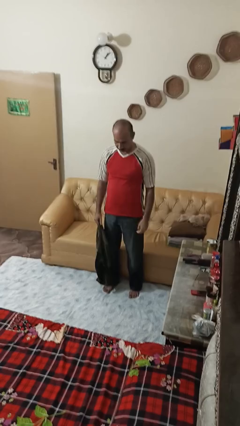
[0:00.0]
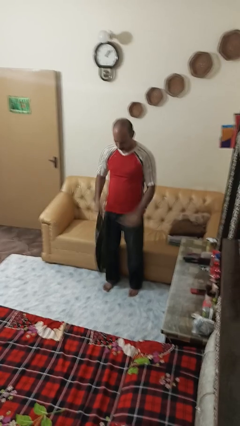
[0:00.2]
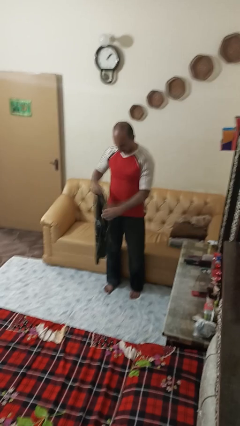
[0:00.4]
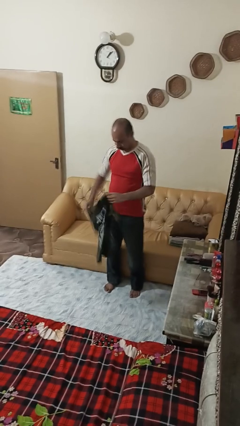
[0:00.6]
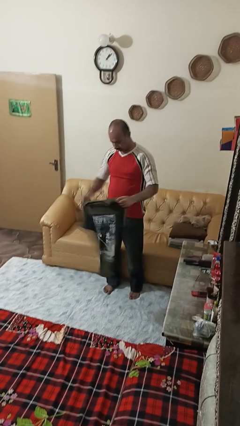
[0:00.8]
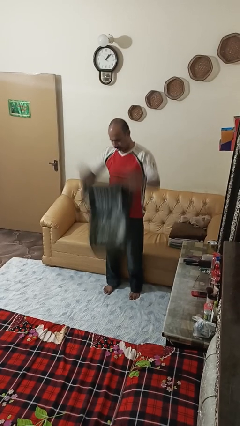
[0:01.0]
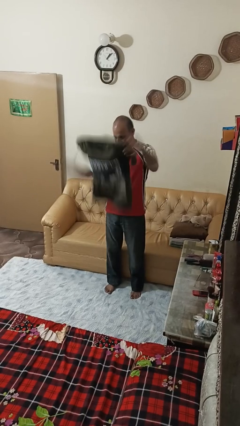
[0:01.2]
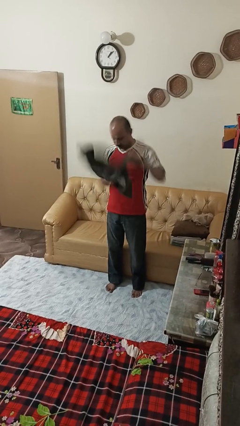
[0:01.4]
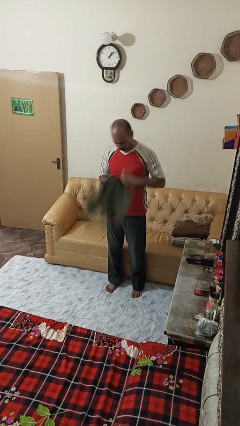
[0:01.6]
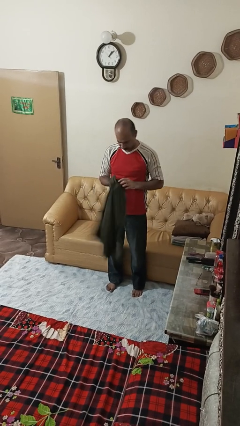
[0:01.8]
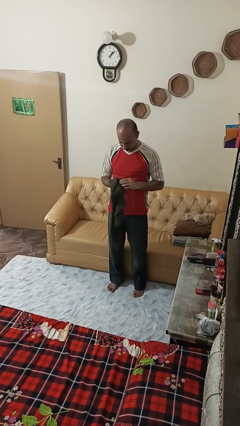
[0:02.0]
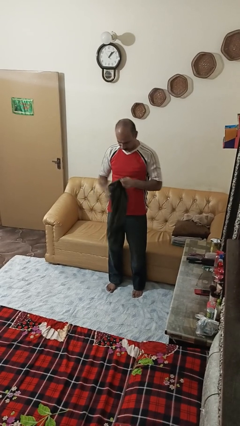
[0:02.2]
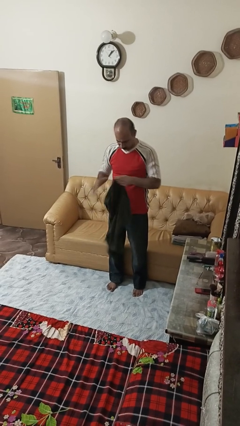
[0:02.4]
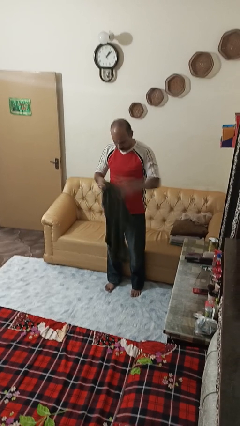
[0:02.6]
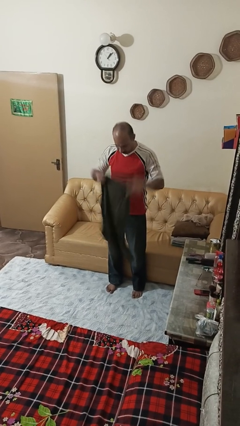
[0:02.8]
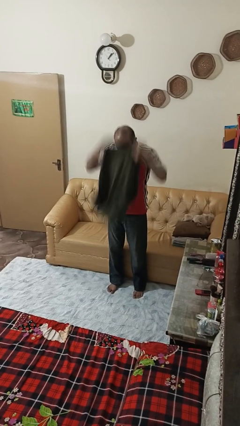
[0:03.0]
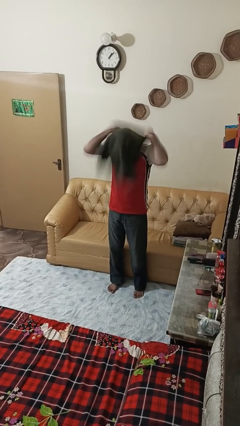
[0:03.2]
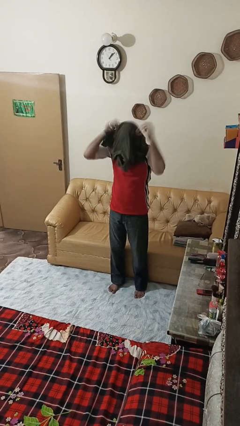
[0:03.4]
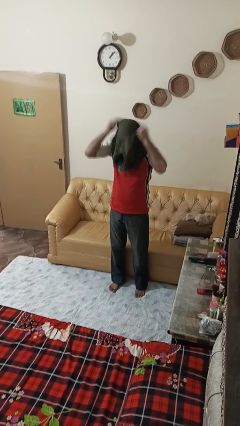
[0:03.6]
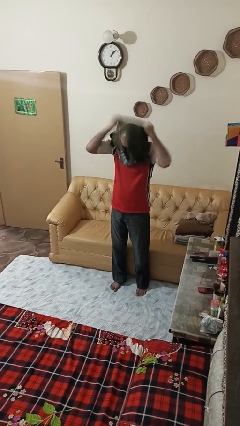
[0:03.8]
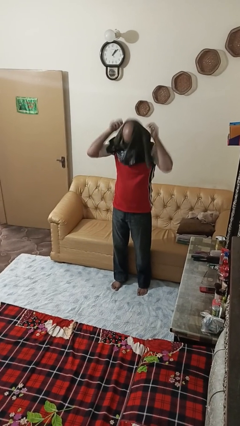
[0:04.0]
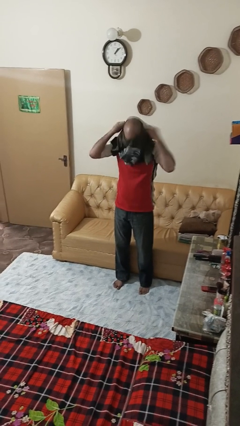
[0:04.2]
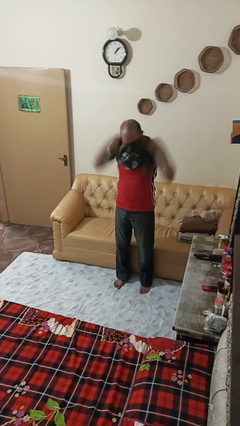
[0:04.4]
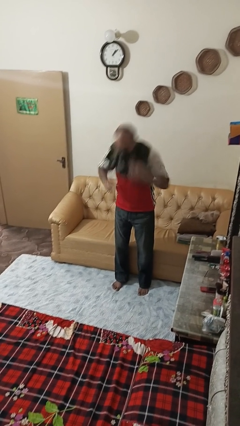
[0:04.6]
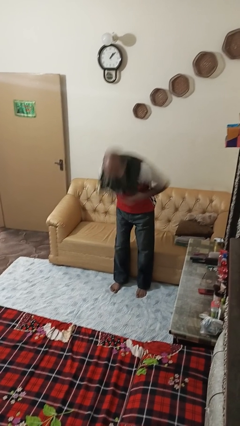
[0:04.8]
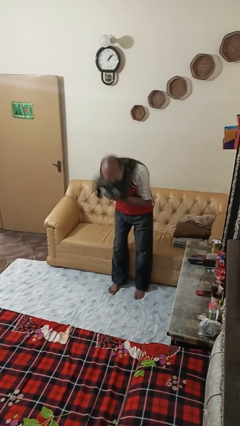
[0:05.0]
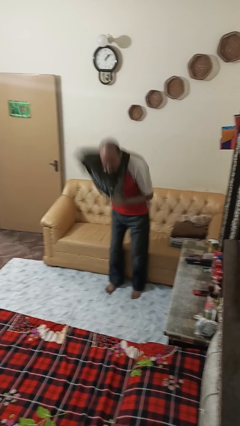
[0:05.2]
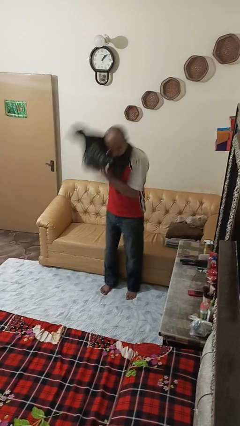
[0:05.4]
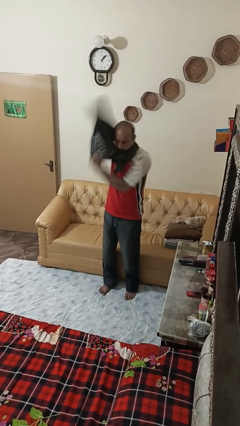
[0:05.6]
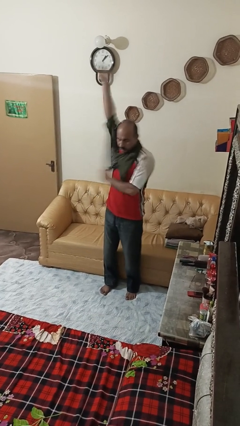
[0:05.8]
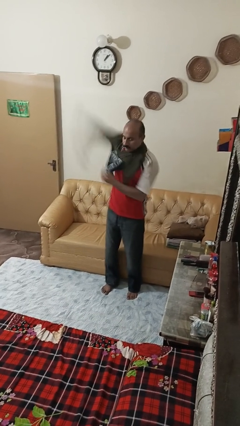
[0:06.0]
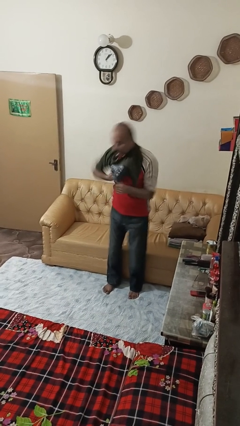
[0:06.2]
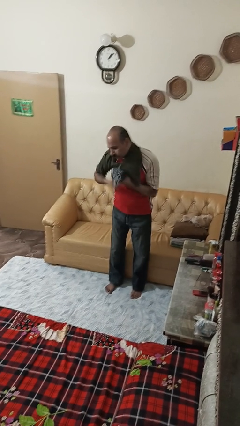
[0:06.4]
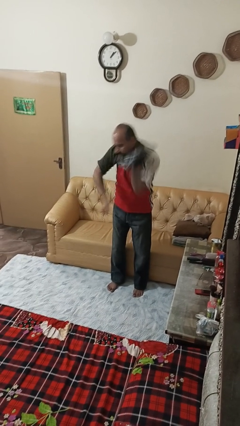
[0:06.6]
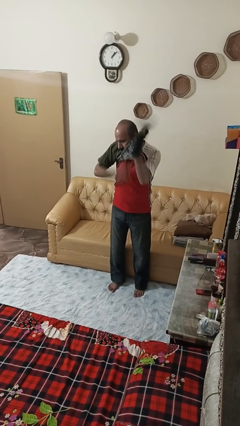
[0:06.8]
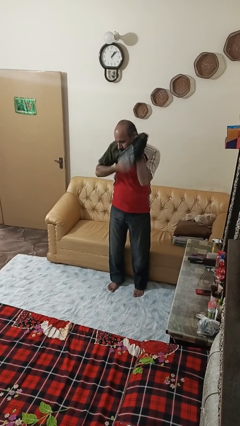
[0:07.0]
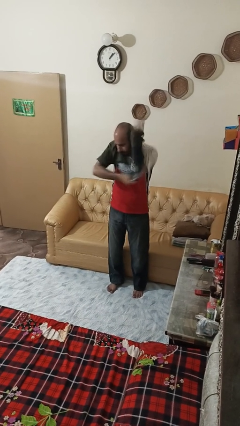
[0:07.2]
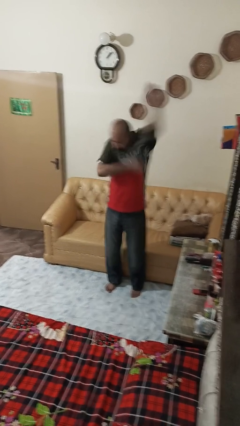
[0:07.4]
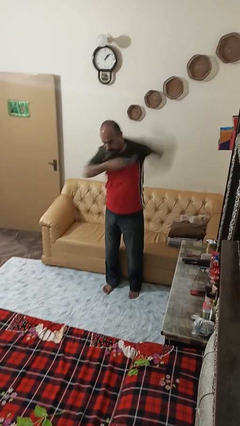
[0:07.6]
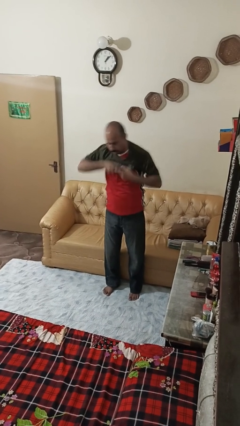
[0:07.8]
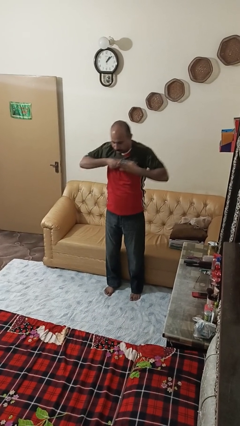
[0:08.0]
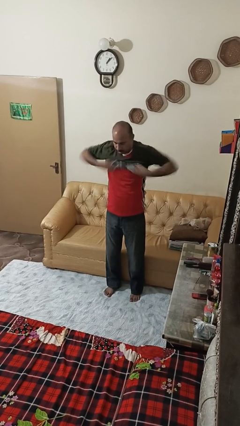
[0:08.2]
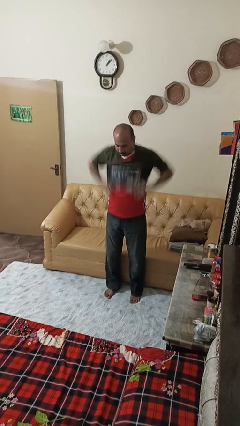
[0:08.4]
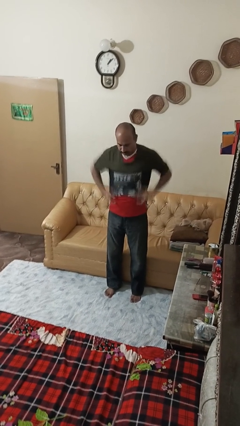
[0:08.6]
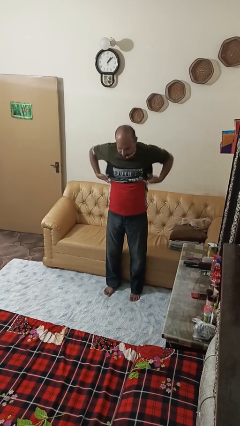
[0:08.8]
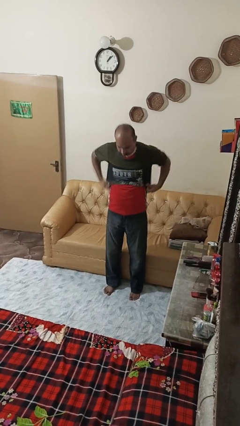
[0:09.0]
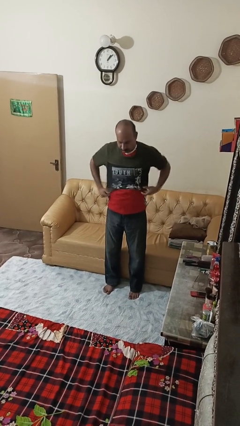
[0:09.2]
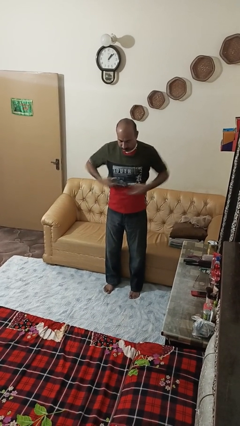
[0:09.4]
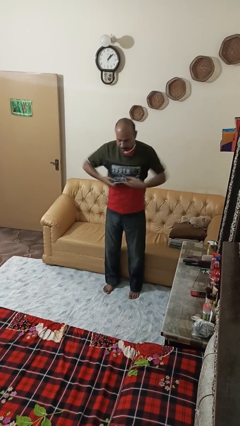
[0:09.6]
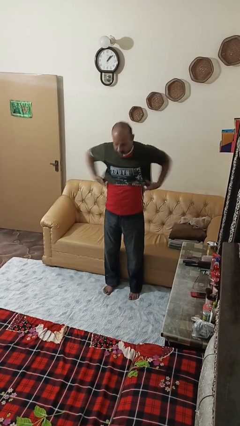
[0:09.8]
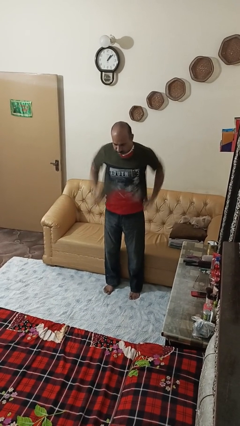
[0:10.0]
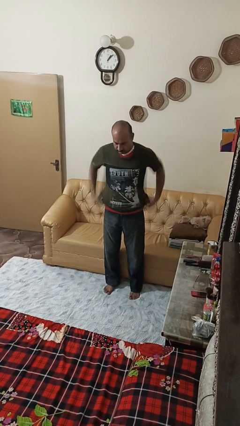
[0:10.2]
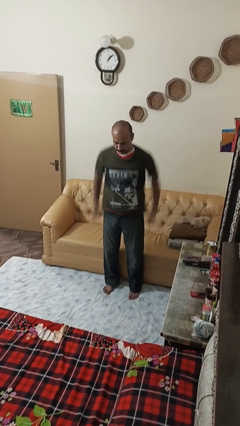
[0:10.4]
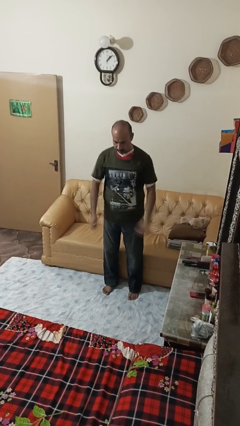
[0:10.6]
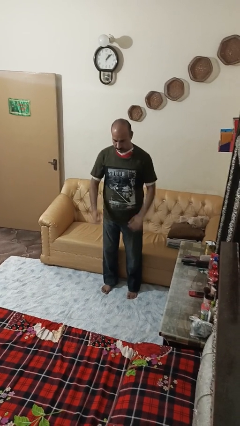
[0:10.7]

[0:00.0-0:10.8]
person puts on shirt

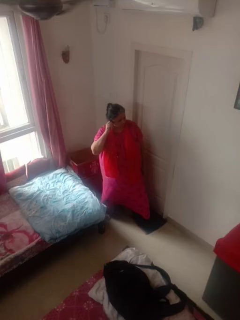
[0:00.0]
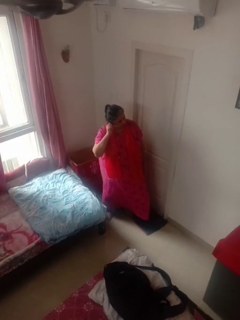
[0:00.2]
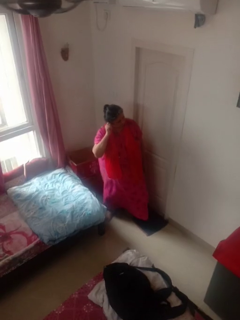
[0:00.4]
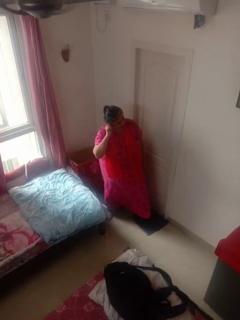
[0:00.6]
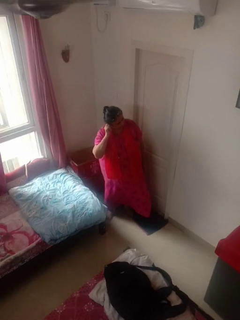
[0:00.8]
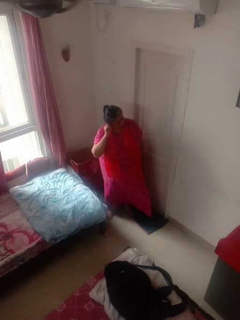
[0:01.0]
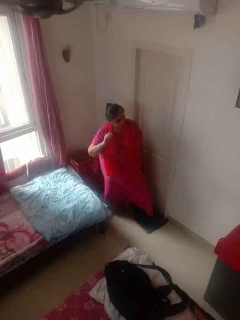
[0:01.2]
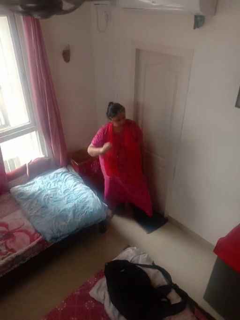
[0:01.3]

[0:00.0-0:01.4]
person touches earlobe

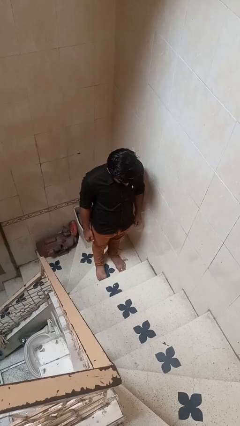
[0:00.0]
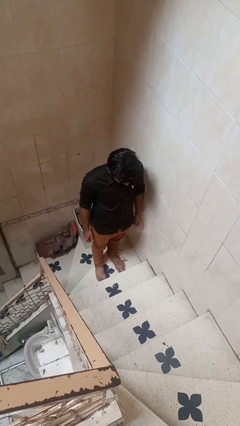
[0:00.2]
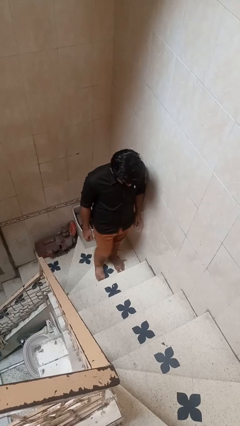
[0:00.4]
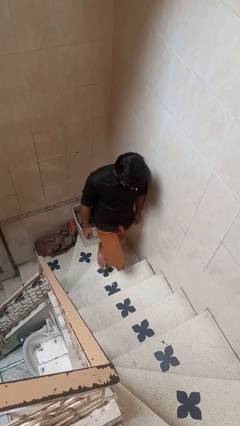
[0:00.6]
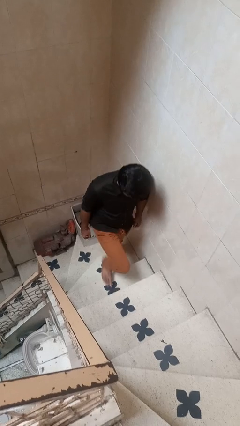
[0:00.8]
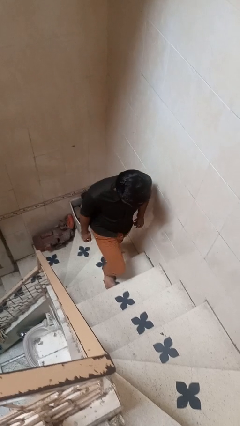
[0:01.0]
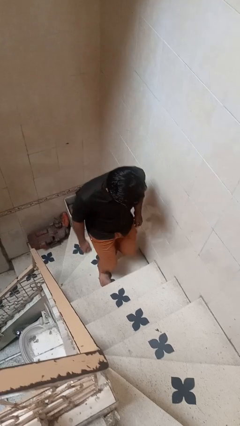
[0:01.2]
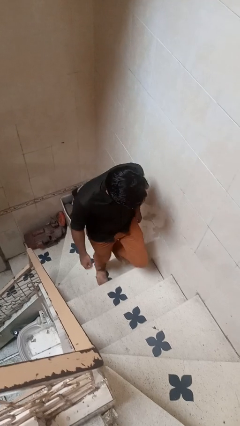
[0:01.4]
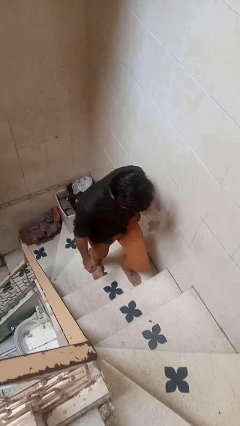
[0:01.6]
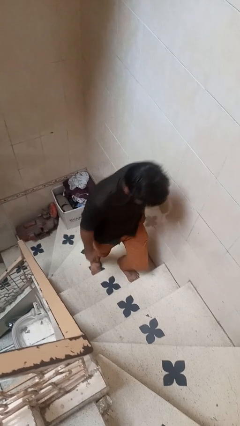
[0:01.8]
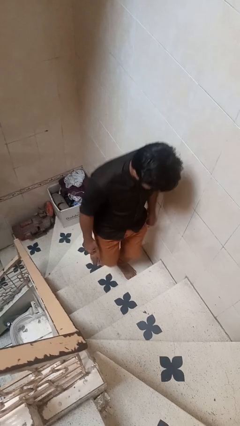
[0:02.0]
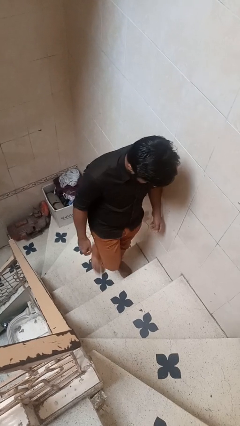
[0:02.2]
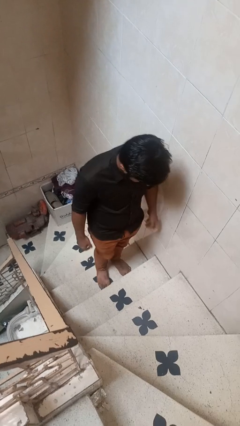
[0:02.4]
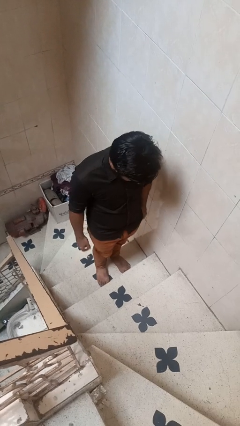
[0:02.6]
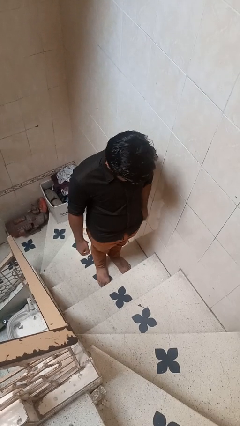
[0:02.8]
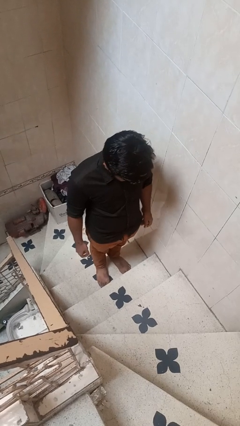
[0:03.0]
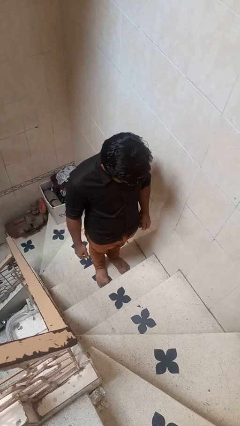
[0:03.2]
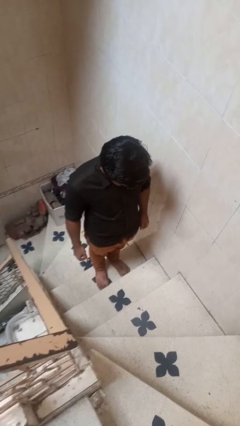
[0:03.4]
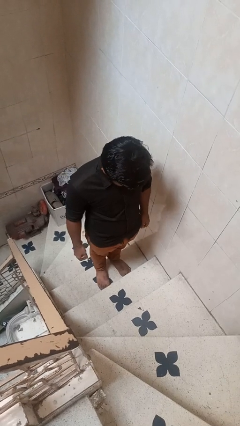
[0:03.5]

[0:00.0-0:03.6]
person climbs up stairs

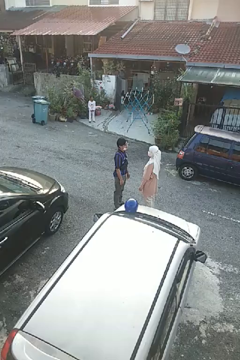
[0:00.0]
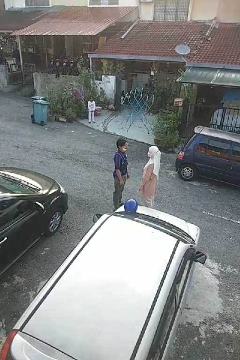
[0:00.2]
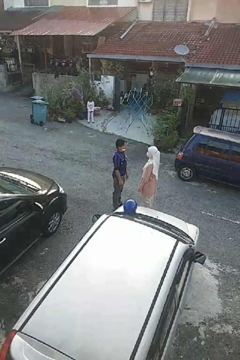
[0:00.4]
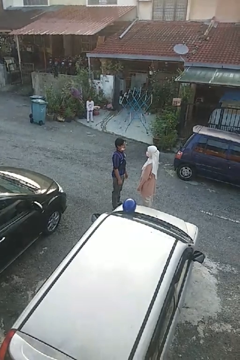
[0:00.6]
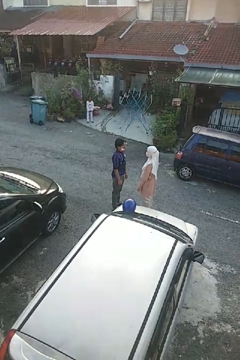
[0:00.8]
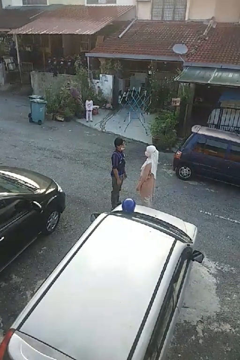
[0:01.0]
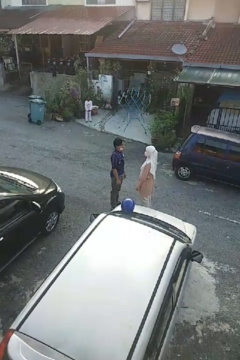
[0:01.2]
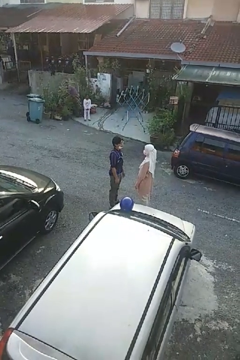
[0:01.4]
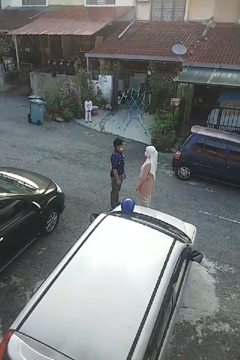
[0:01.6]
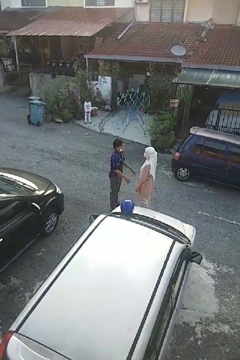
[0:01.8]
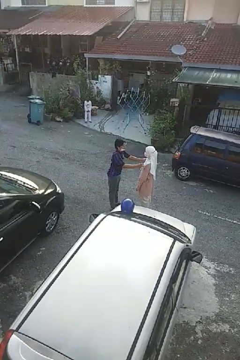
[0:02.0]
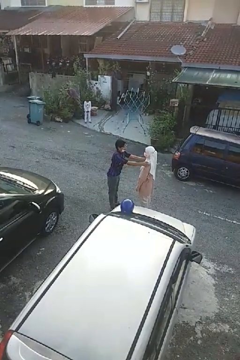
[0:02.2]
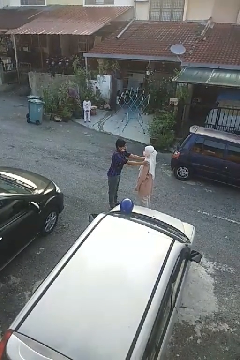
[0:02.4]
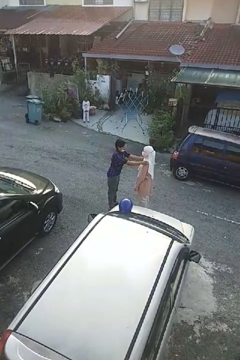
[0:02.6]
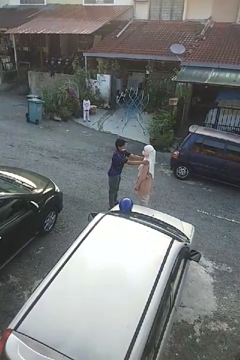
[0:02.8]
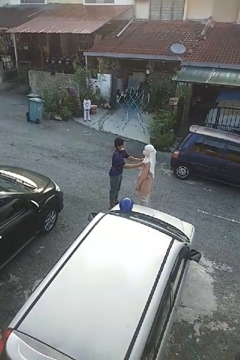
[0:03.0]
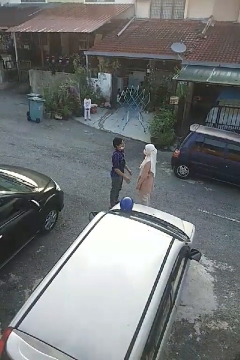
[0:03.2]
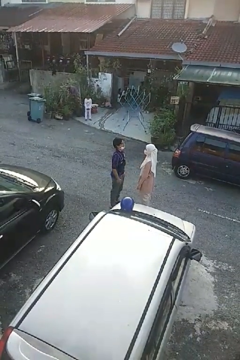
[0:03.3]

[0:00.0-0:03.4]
person pounds shoulders of person
